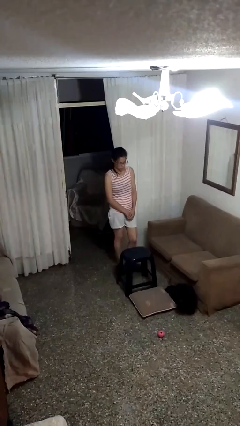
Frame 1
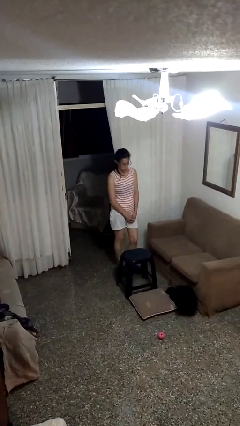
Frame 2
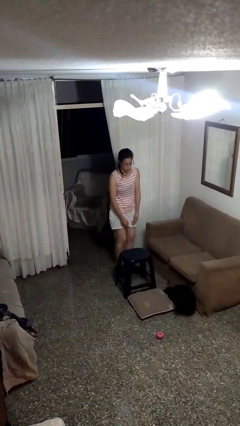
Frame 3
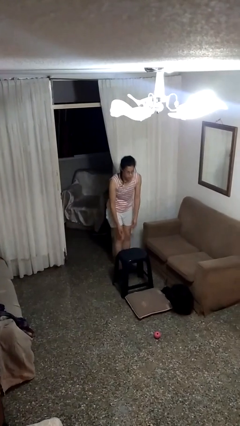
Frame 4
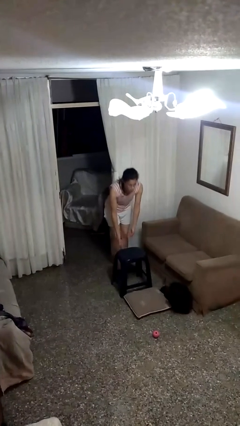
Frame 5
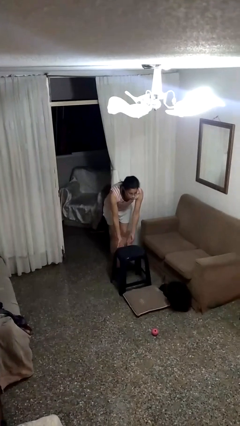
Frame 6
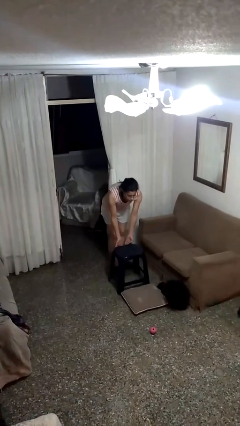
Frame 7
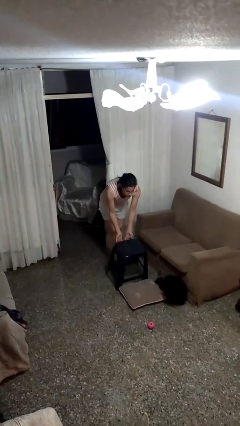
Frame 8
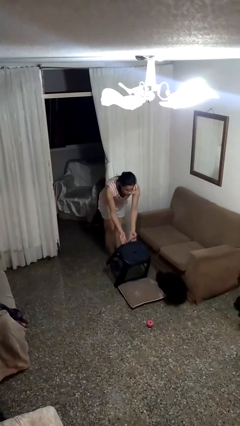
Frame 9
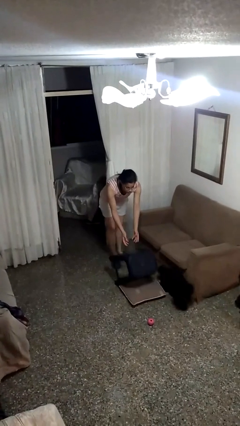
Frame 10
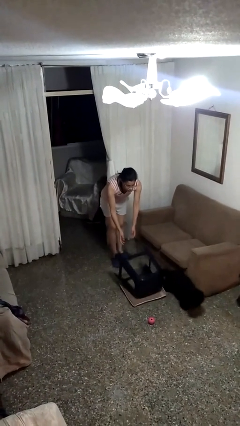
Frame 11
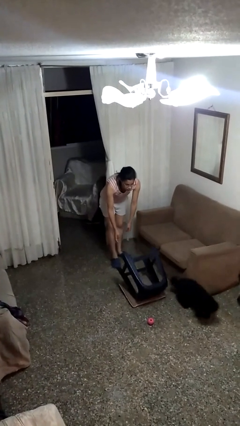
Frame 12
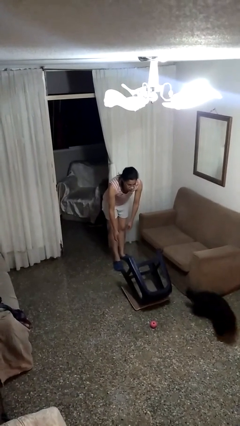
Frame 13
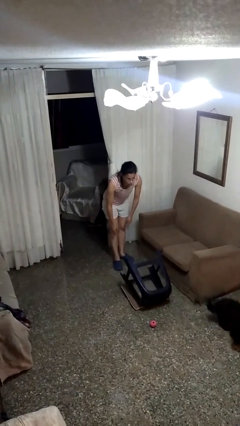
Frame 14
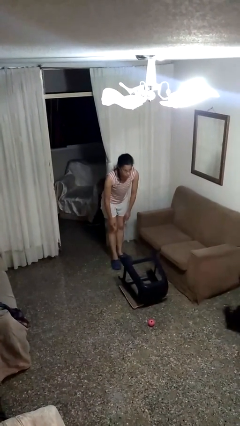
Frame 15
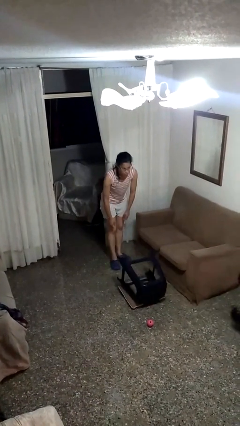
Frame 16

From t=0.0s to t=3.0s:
person knocks over furniture

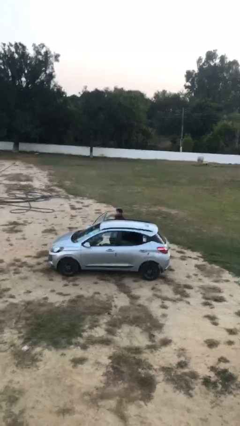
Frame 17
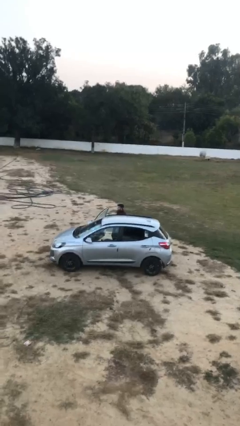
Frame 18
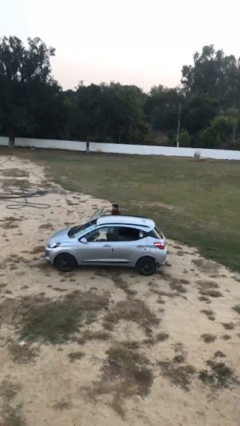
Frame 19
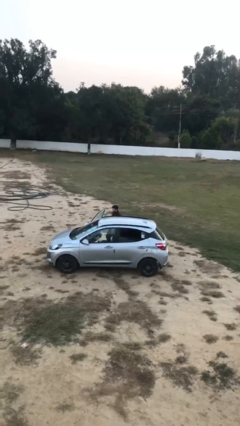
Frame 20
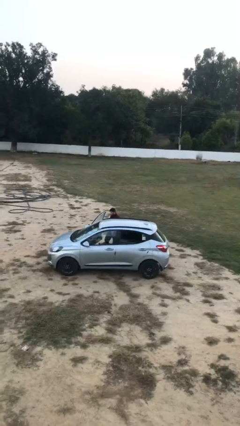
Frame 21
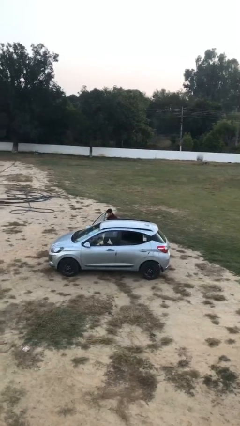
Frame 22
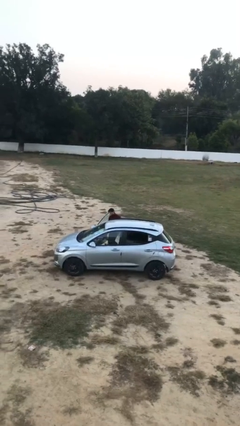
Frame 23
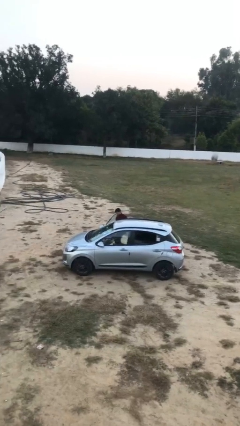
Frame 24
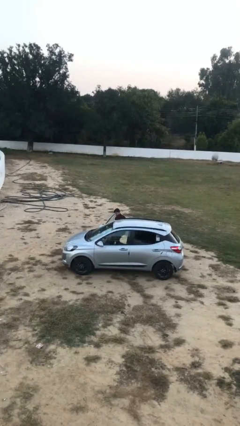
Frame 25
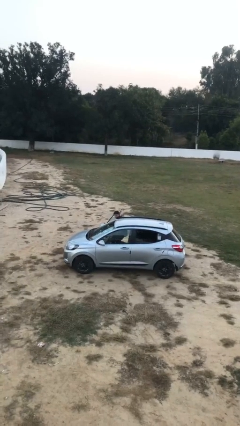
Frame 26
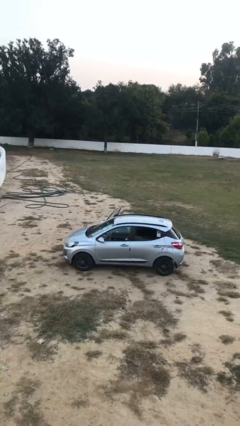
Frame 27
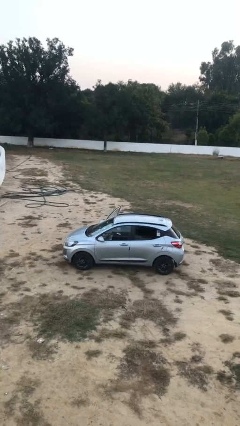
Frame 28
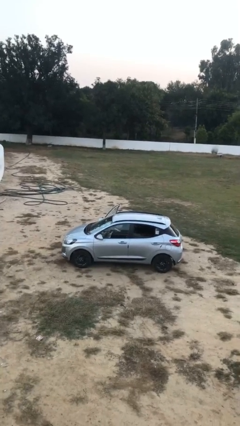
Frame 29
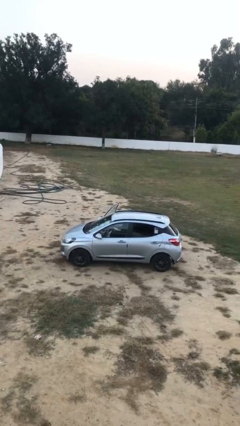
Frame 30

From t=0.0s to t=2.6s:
person enters car

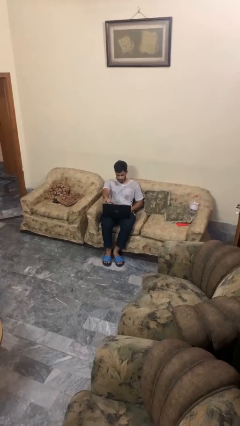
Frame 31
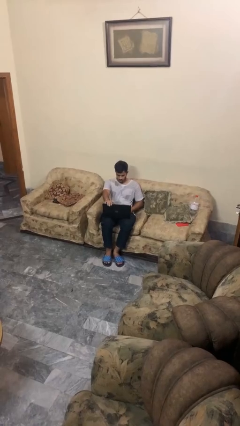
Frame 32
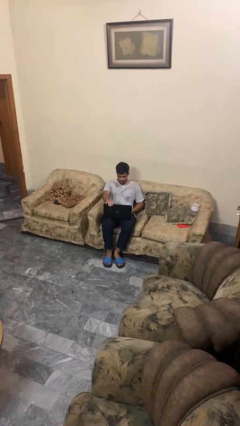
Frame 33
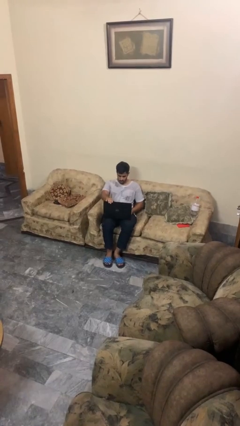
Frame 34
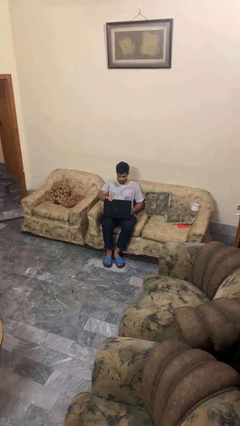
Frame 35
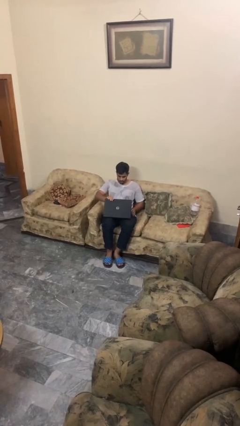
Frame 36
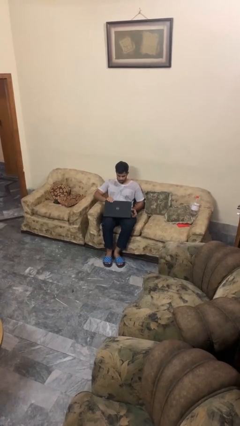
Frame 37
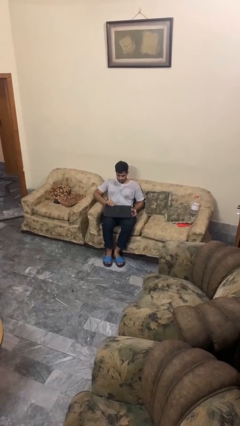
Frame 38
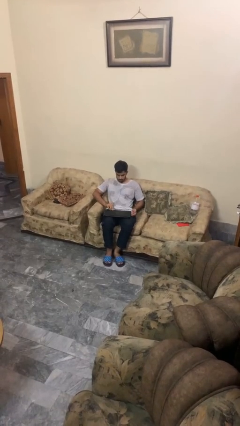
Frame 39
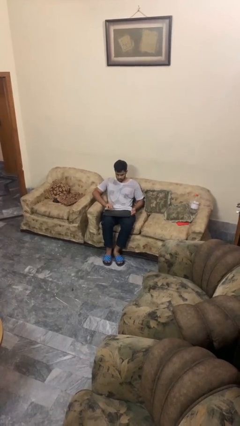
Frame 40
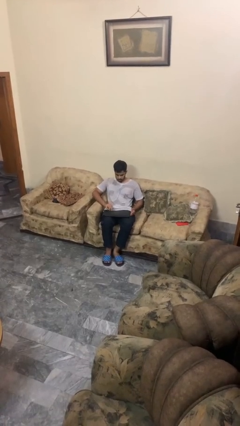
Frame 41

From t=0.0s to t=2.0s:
person closes laptop

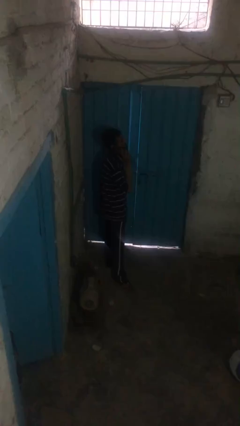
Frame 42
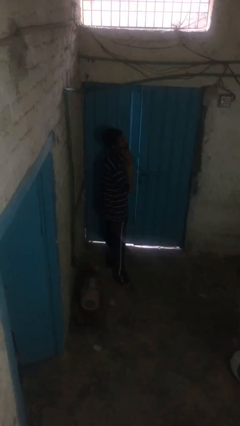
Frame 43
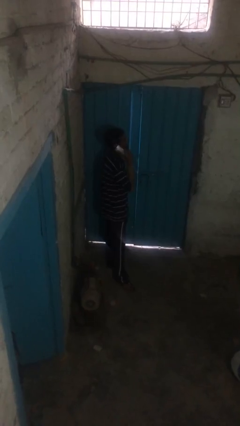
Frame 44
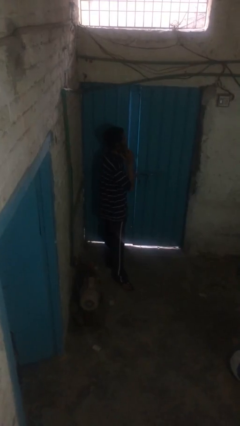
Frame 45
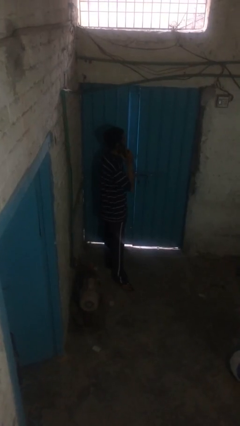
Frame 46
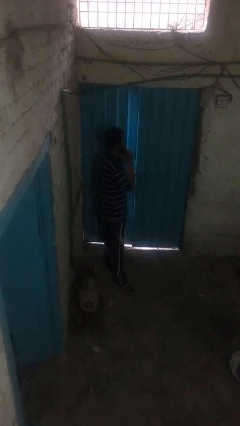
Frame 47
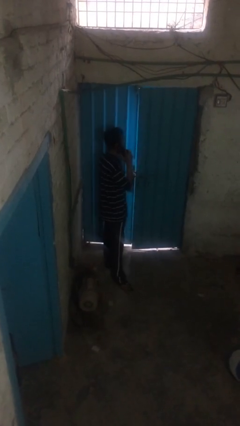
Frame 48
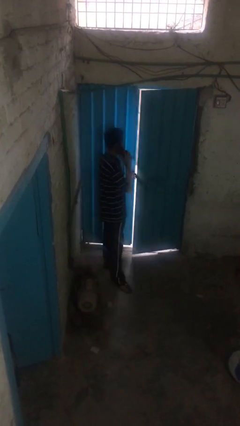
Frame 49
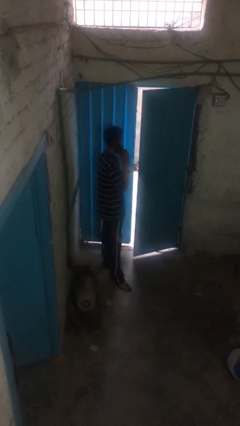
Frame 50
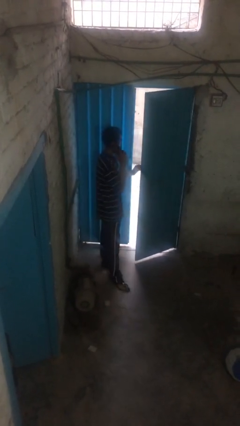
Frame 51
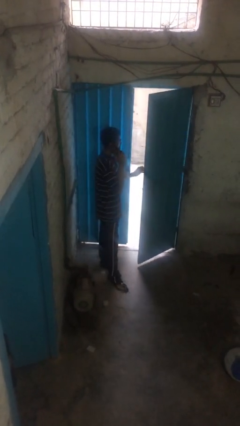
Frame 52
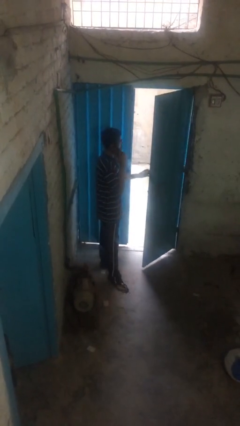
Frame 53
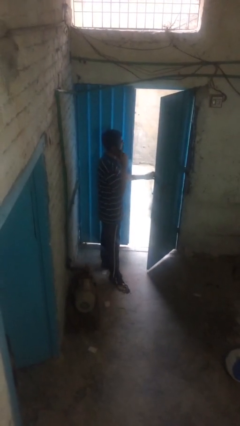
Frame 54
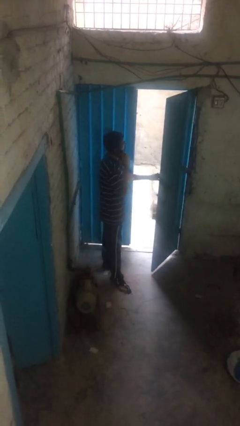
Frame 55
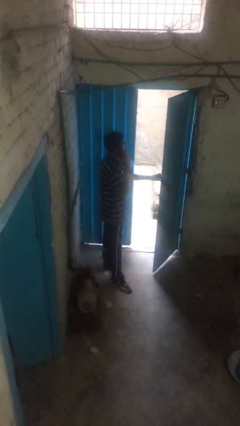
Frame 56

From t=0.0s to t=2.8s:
person opens facility door

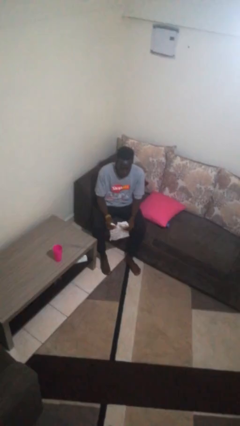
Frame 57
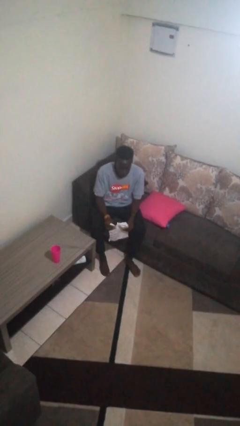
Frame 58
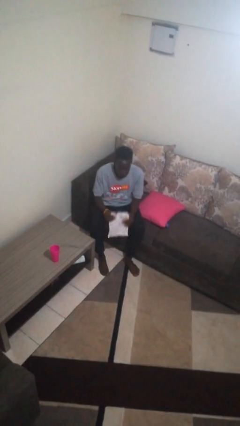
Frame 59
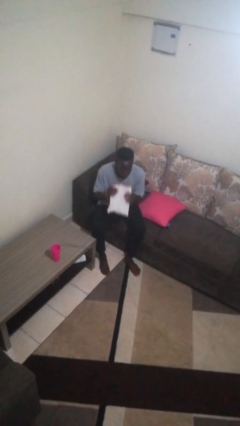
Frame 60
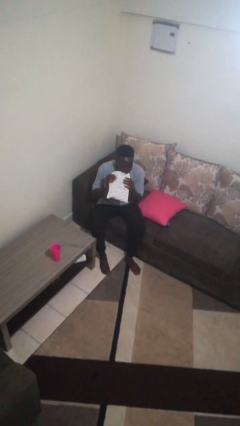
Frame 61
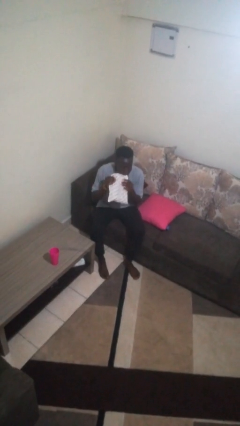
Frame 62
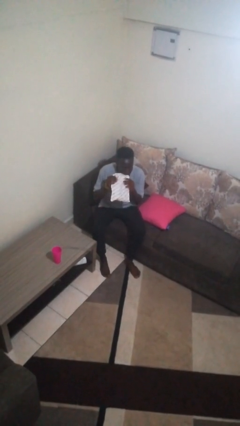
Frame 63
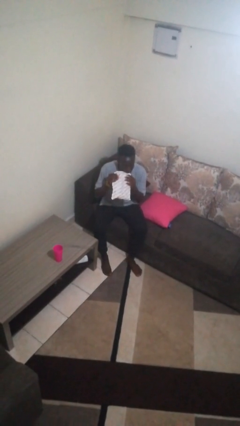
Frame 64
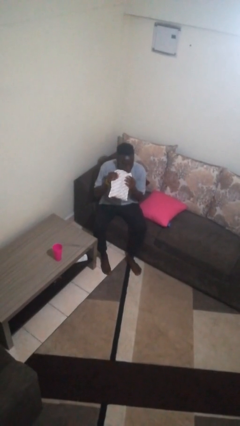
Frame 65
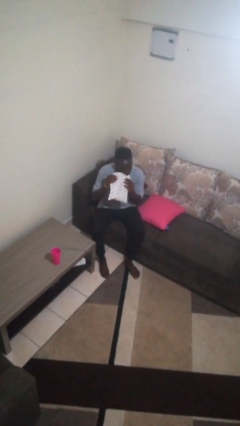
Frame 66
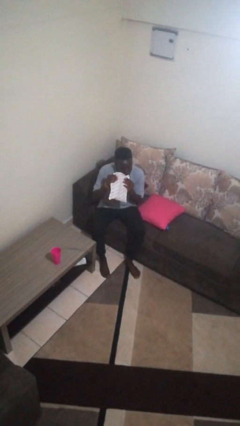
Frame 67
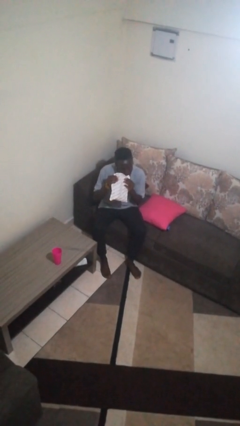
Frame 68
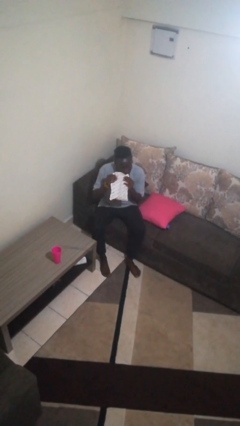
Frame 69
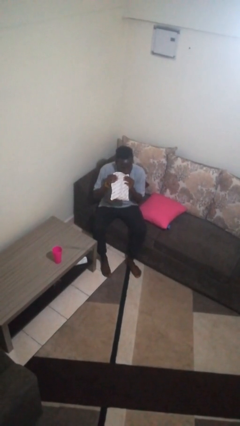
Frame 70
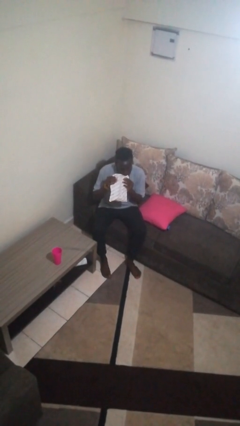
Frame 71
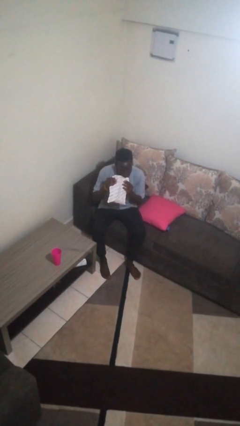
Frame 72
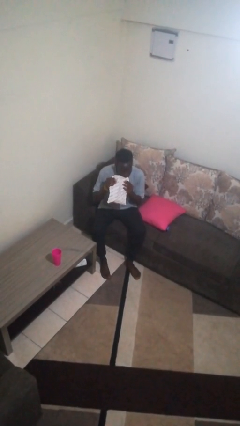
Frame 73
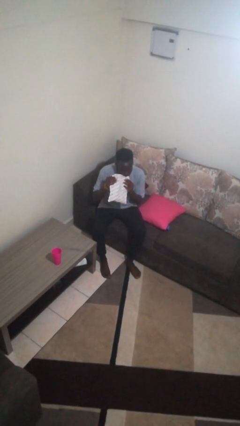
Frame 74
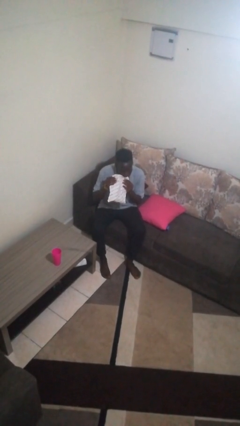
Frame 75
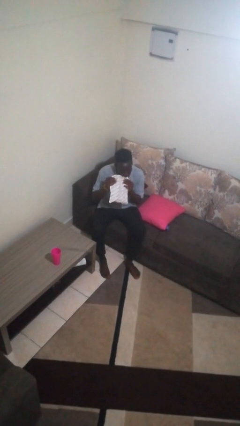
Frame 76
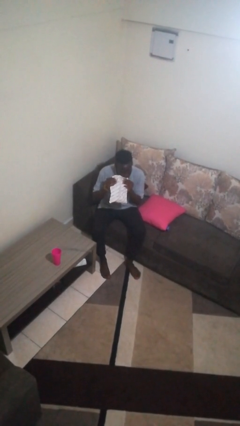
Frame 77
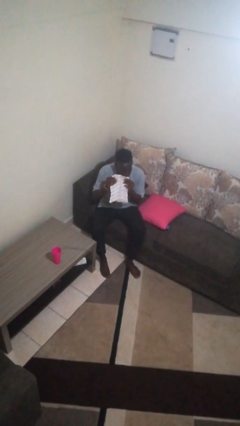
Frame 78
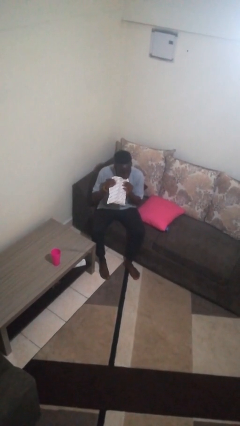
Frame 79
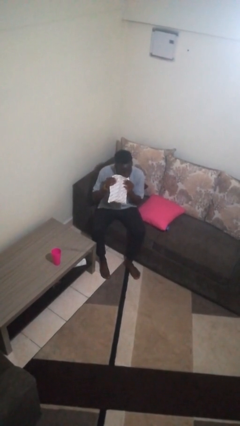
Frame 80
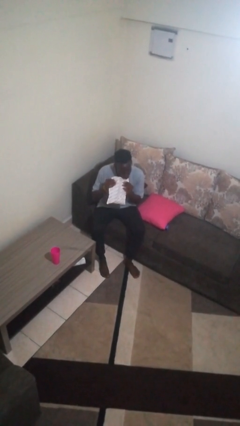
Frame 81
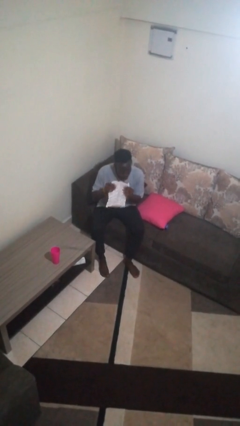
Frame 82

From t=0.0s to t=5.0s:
person eats snack from bag

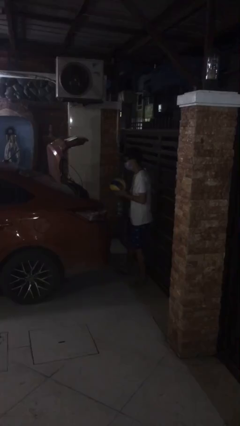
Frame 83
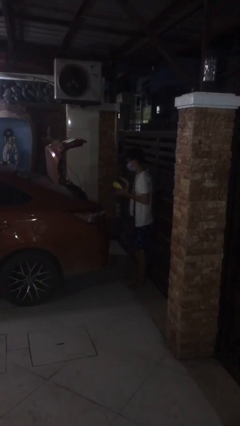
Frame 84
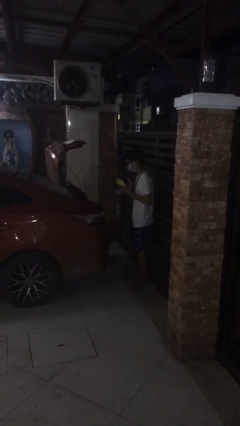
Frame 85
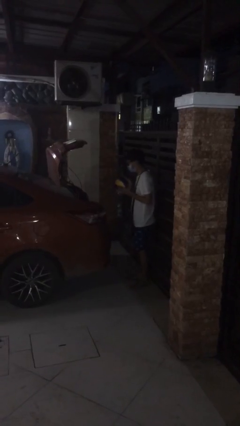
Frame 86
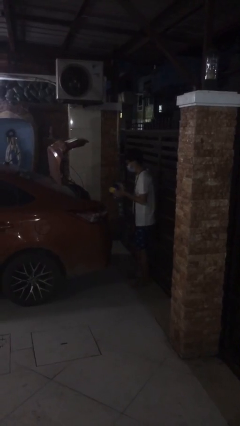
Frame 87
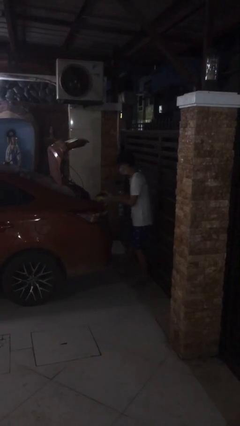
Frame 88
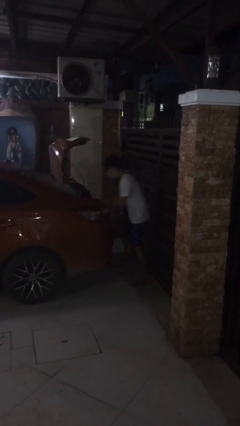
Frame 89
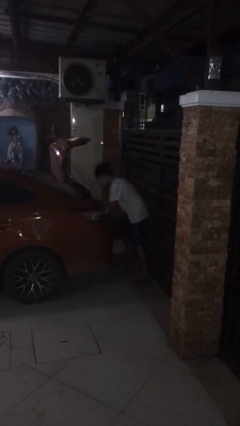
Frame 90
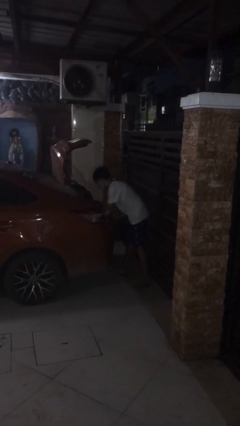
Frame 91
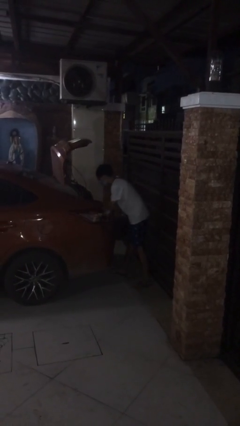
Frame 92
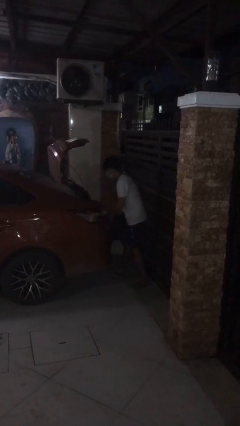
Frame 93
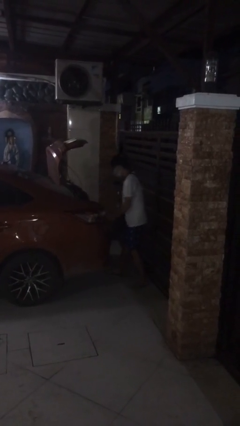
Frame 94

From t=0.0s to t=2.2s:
person loads car
